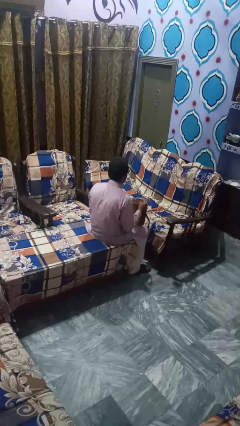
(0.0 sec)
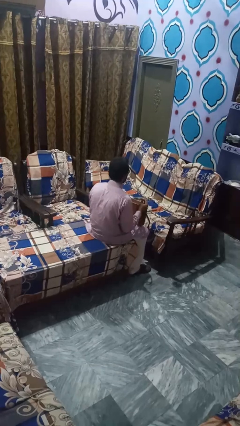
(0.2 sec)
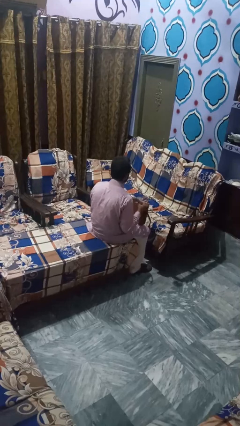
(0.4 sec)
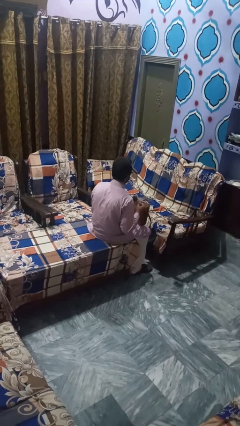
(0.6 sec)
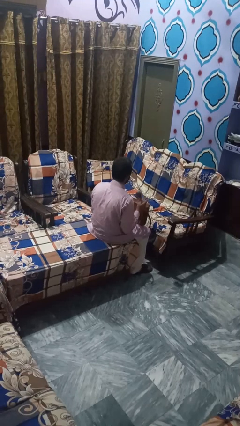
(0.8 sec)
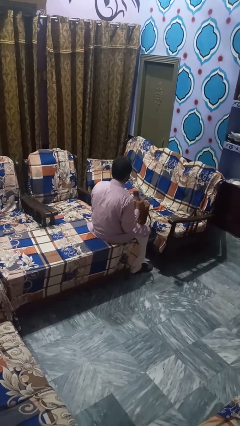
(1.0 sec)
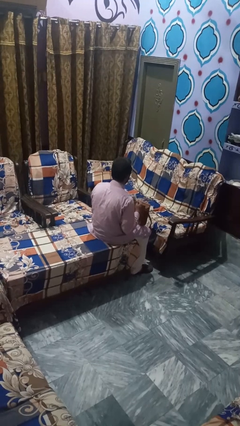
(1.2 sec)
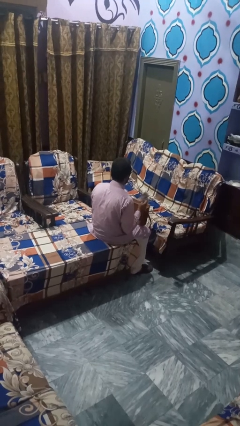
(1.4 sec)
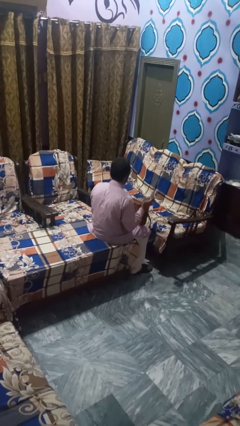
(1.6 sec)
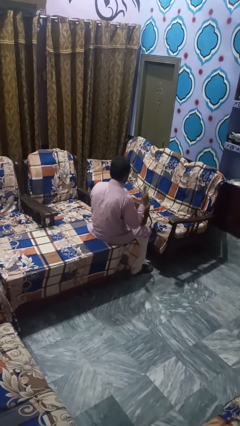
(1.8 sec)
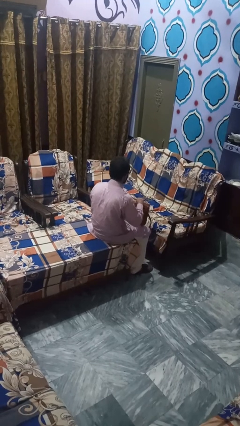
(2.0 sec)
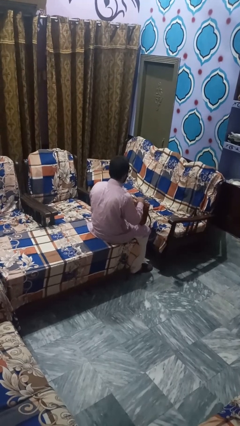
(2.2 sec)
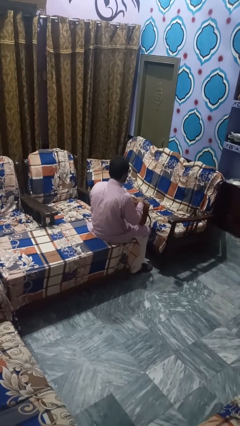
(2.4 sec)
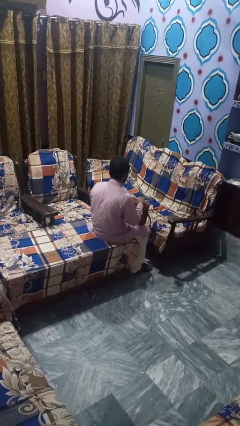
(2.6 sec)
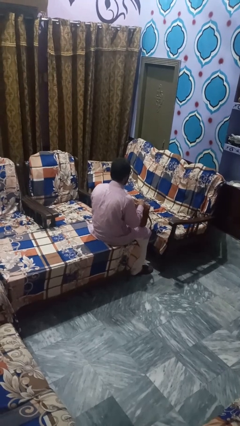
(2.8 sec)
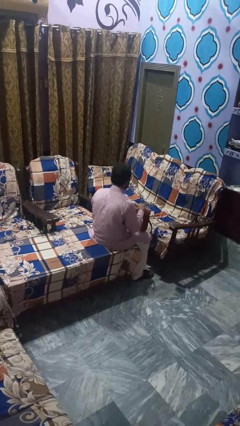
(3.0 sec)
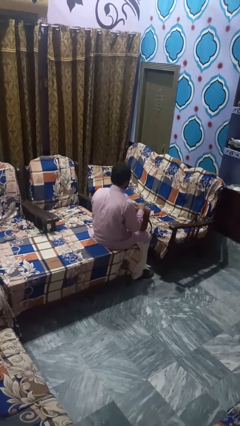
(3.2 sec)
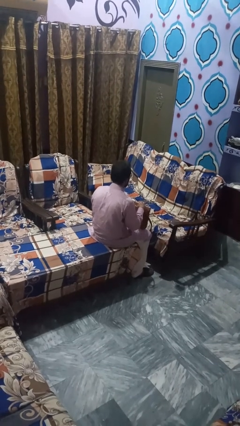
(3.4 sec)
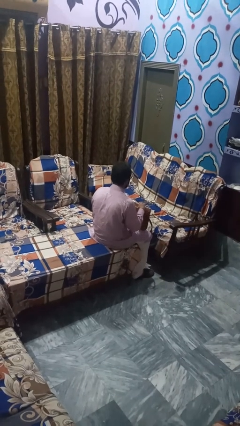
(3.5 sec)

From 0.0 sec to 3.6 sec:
person takes object from bag

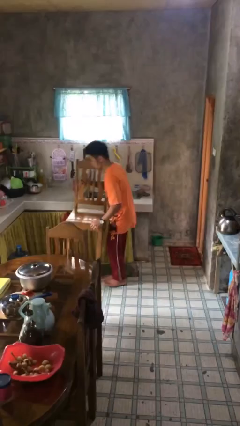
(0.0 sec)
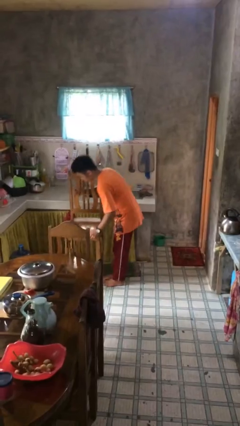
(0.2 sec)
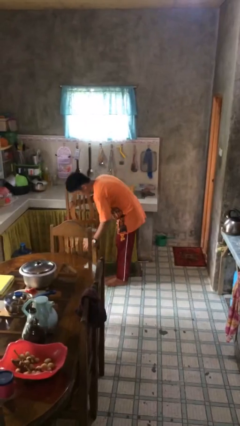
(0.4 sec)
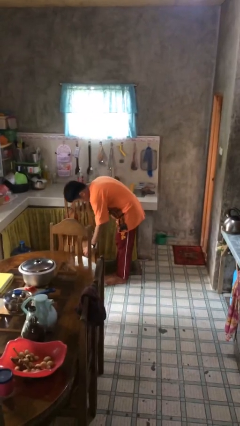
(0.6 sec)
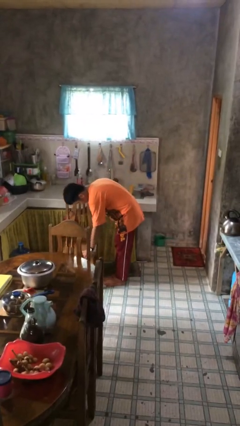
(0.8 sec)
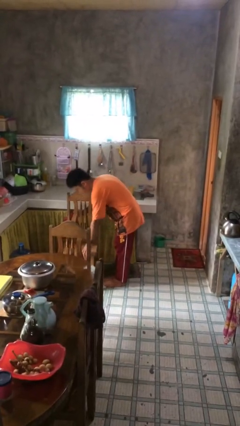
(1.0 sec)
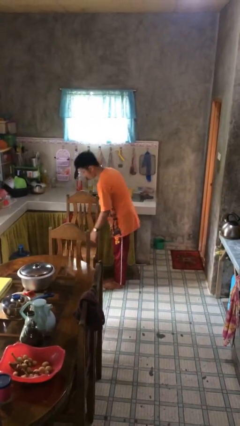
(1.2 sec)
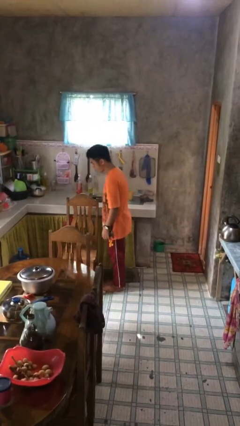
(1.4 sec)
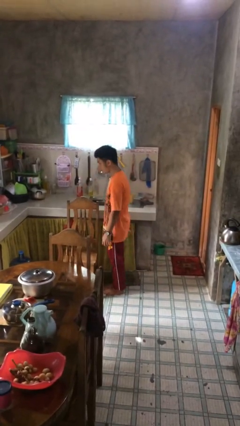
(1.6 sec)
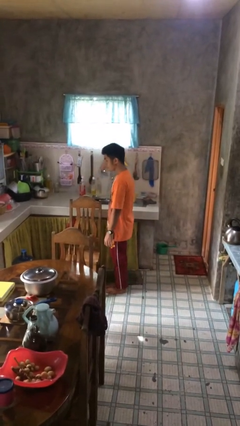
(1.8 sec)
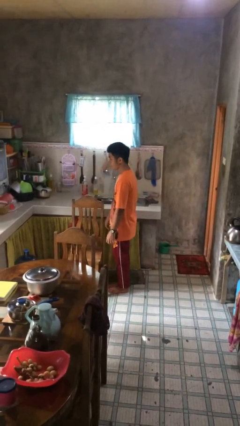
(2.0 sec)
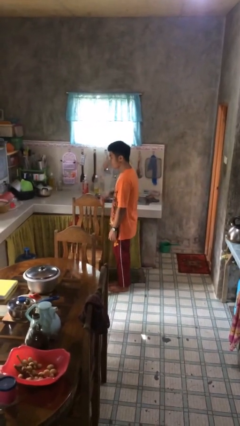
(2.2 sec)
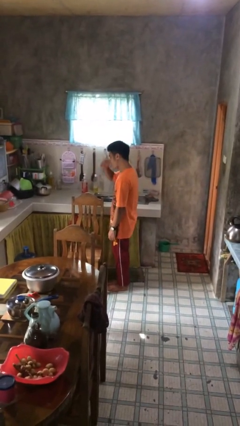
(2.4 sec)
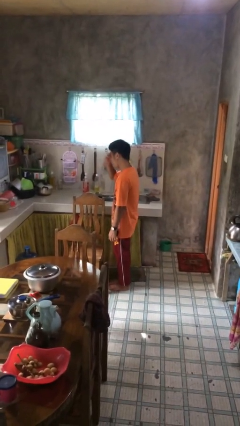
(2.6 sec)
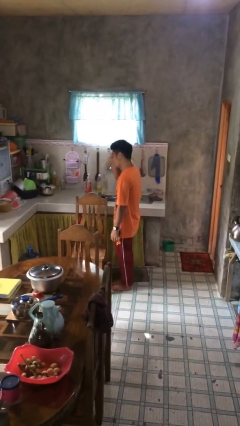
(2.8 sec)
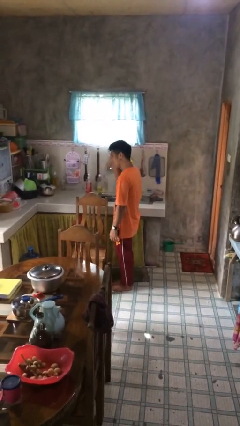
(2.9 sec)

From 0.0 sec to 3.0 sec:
person puts down object on floor

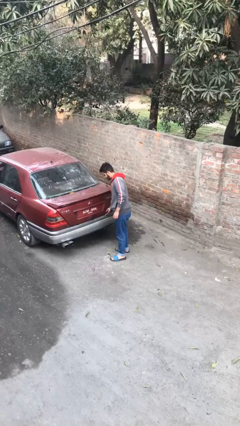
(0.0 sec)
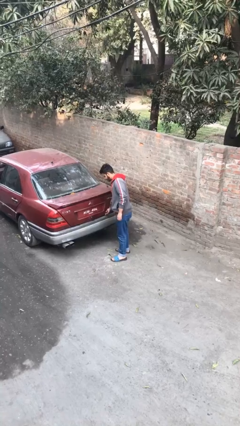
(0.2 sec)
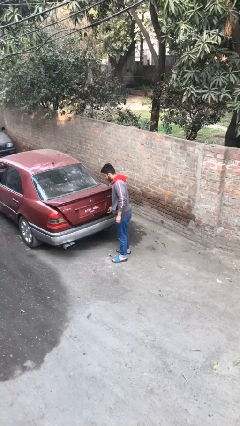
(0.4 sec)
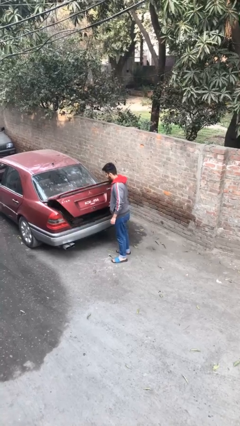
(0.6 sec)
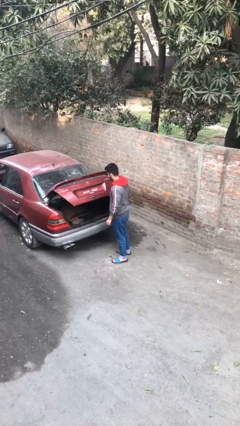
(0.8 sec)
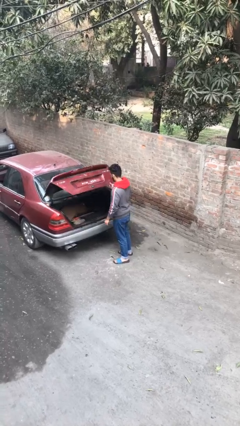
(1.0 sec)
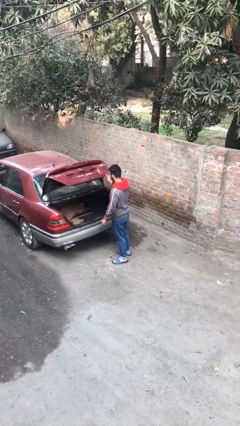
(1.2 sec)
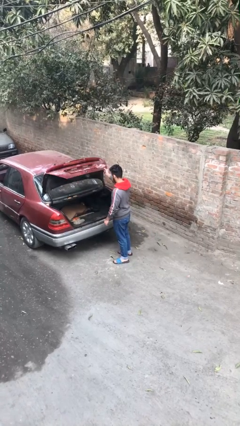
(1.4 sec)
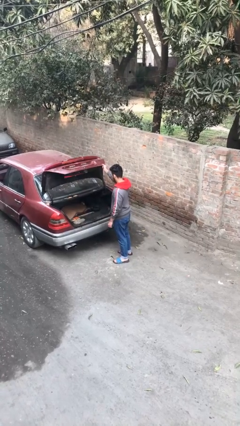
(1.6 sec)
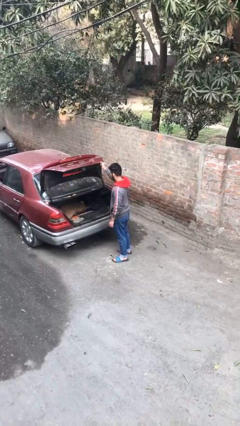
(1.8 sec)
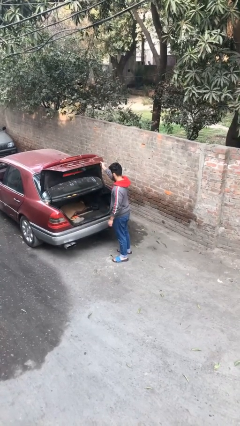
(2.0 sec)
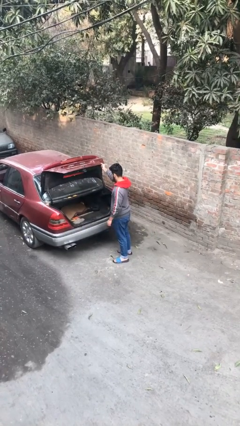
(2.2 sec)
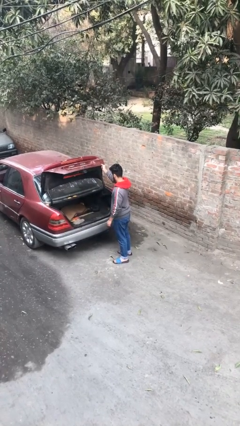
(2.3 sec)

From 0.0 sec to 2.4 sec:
person opens car trunk

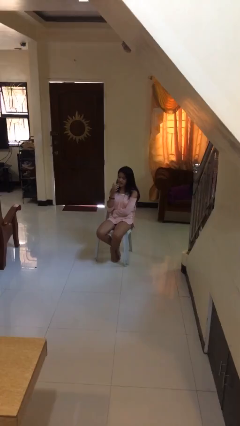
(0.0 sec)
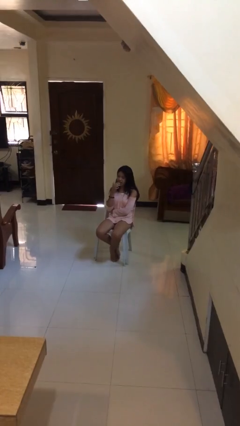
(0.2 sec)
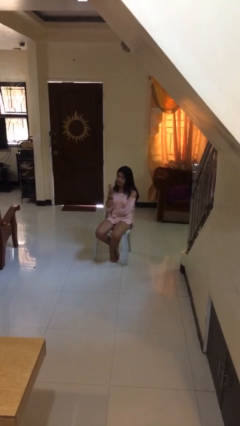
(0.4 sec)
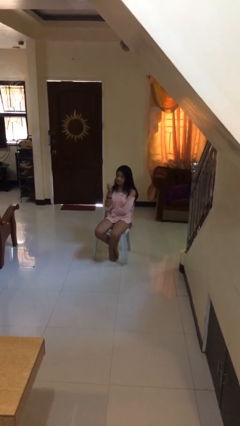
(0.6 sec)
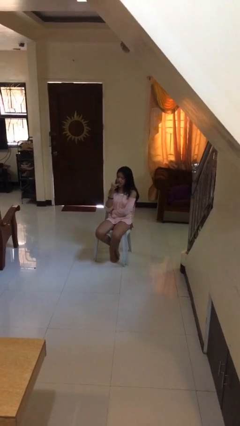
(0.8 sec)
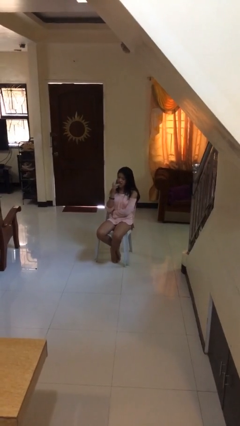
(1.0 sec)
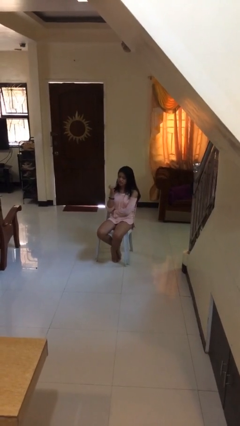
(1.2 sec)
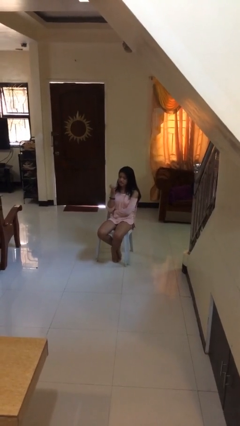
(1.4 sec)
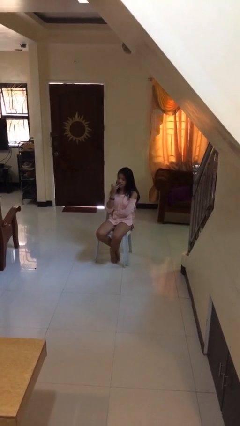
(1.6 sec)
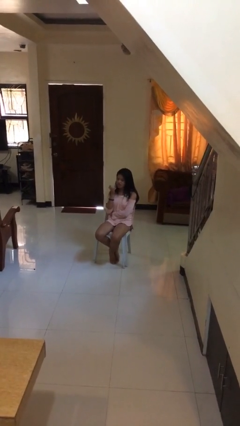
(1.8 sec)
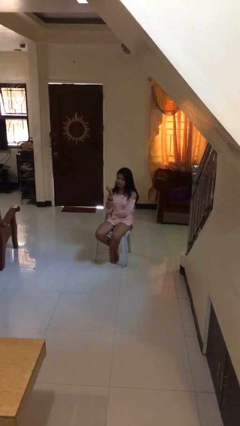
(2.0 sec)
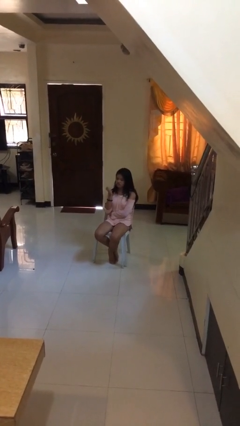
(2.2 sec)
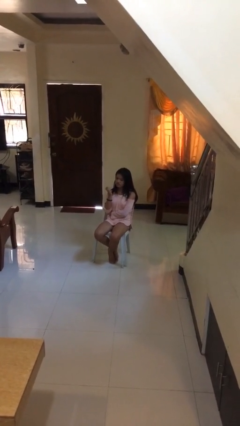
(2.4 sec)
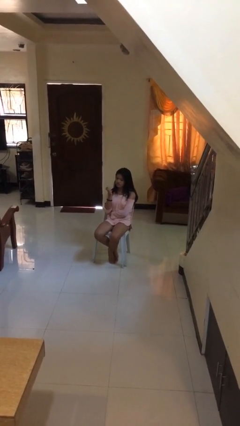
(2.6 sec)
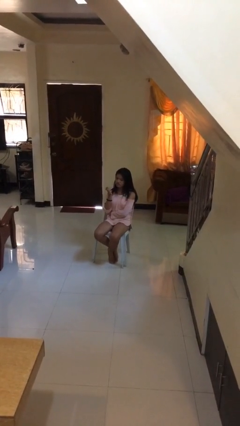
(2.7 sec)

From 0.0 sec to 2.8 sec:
person licks fingers

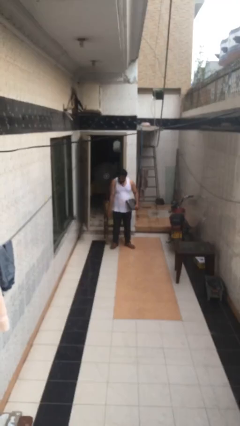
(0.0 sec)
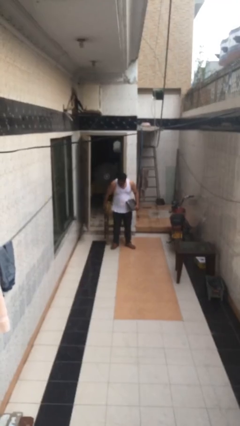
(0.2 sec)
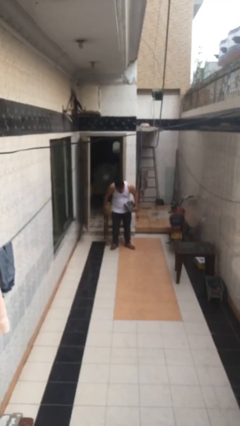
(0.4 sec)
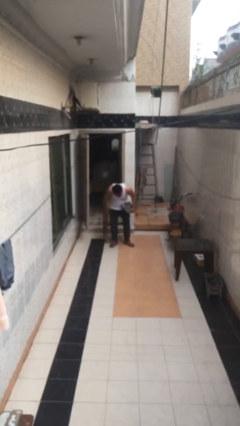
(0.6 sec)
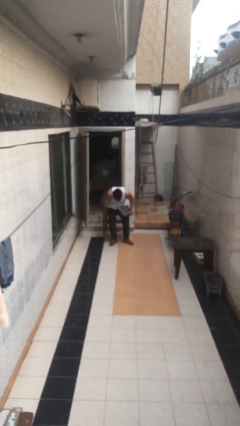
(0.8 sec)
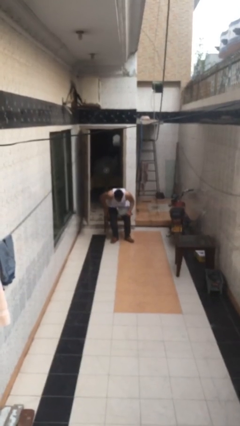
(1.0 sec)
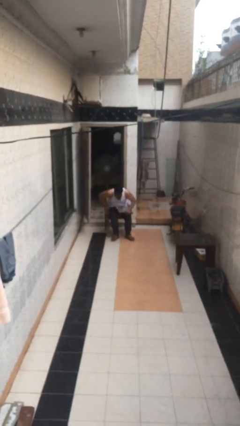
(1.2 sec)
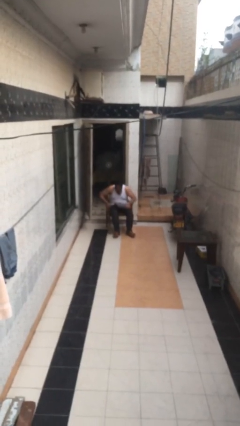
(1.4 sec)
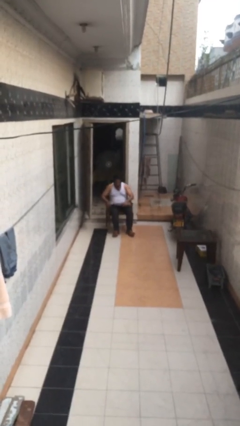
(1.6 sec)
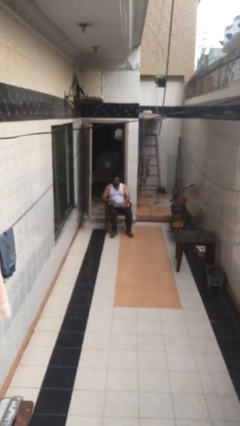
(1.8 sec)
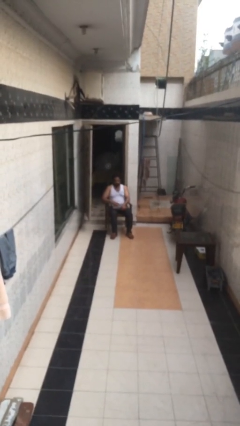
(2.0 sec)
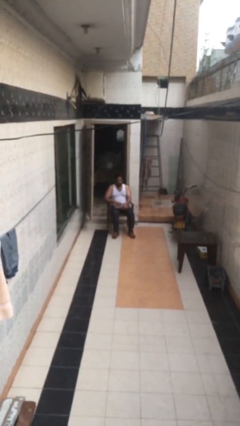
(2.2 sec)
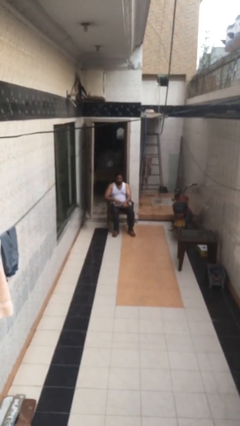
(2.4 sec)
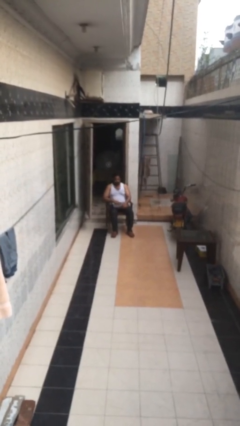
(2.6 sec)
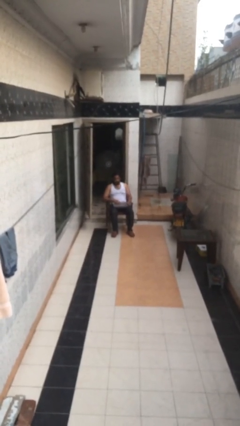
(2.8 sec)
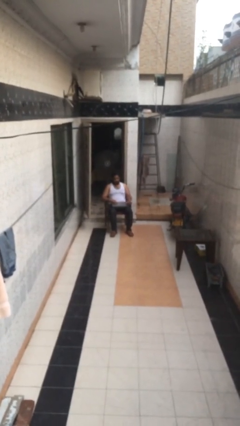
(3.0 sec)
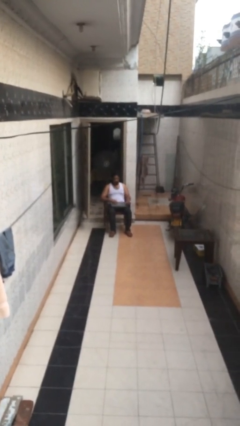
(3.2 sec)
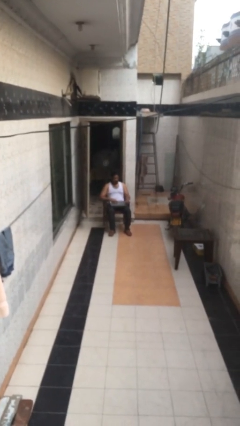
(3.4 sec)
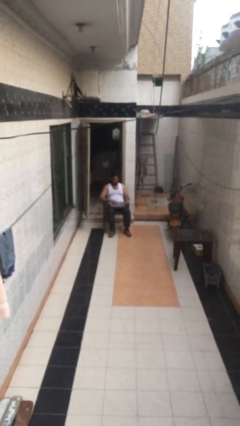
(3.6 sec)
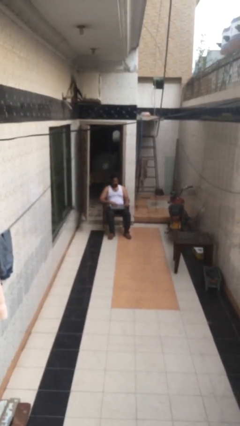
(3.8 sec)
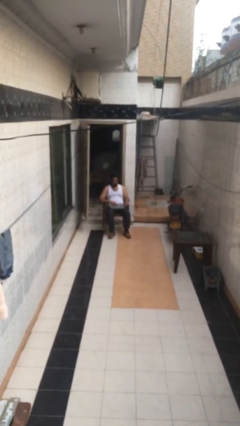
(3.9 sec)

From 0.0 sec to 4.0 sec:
person sits down

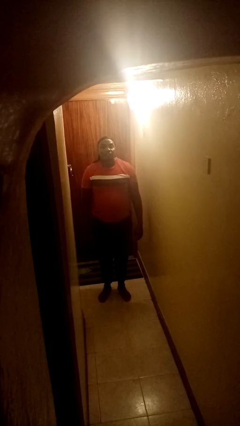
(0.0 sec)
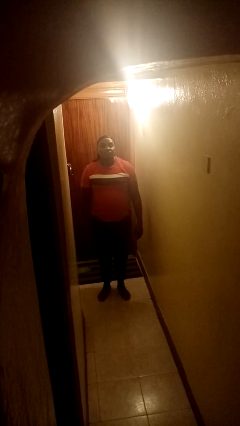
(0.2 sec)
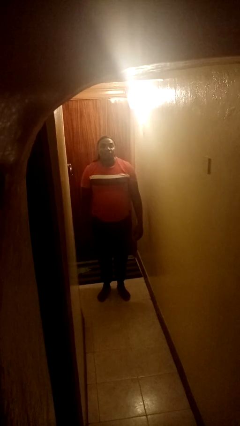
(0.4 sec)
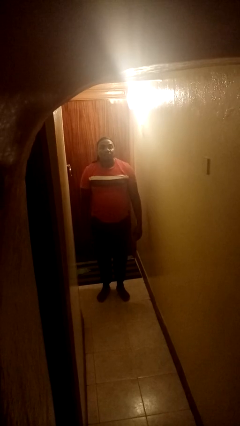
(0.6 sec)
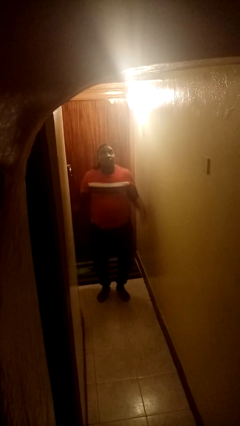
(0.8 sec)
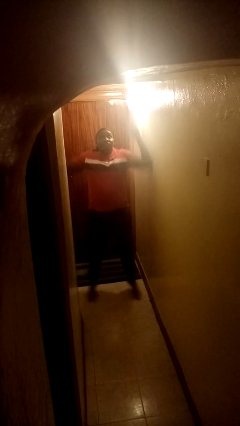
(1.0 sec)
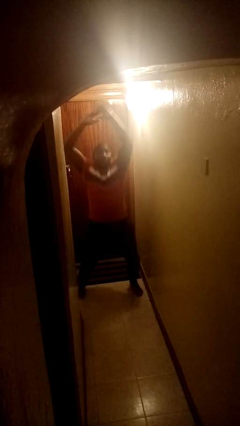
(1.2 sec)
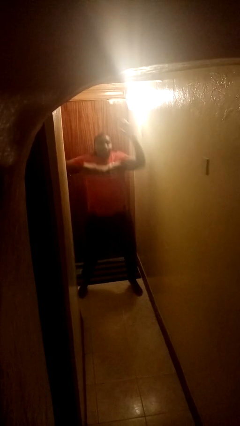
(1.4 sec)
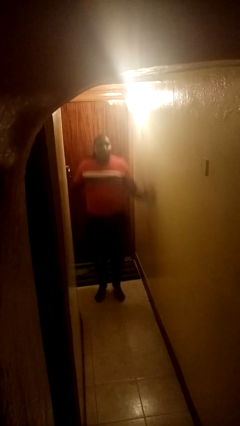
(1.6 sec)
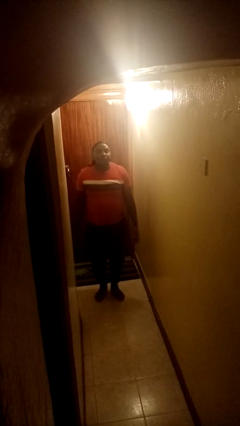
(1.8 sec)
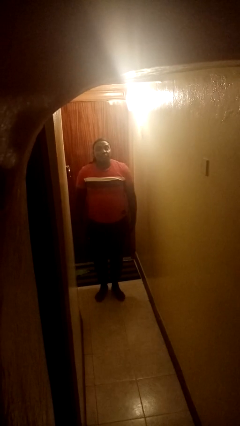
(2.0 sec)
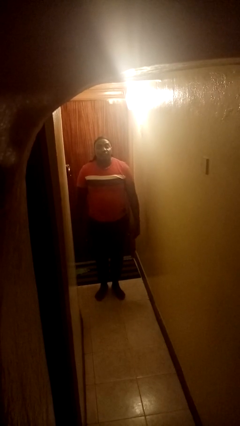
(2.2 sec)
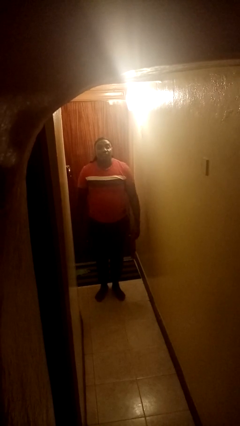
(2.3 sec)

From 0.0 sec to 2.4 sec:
person exercises with jumping jacks
